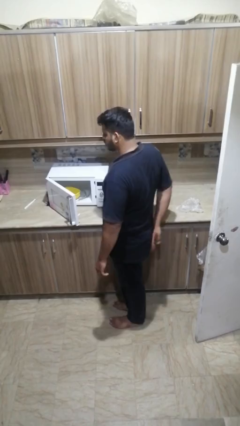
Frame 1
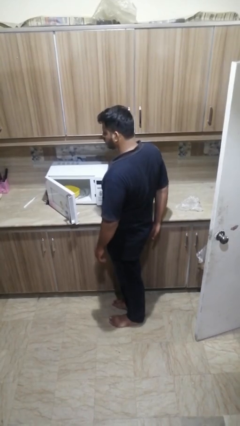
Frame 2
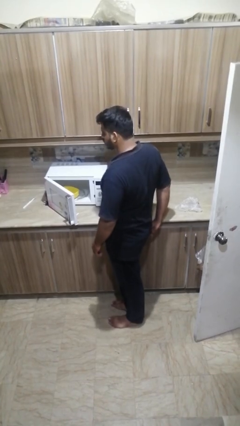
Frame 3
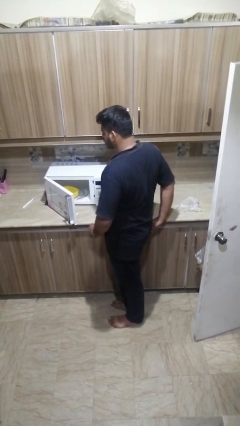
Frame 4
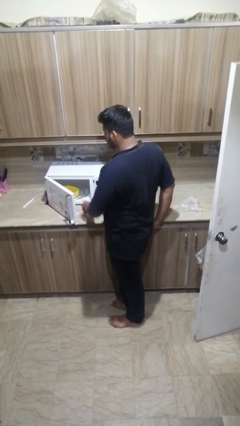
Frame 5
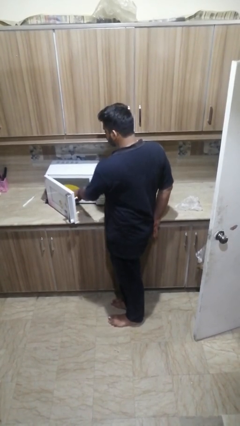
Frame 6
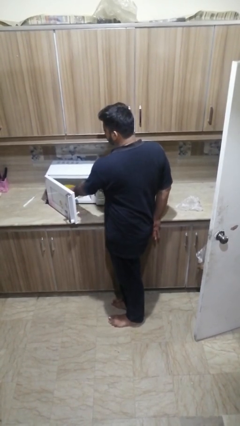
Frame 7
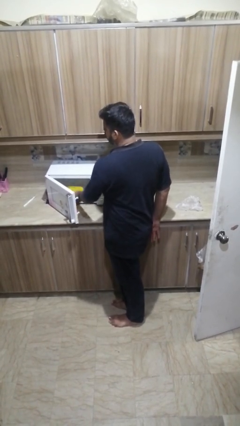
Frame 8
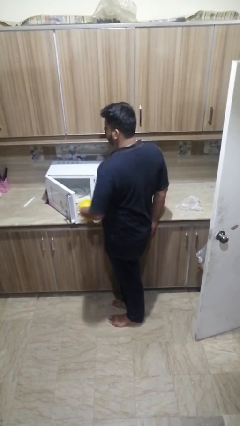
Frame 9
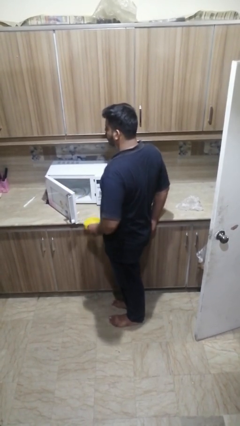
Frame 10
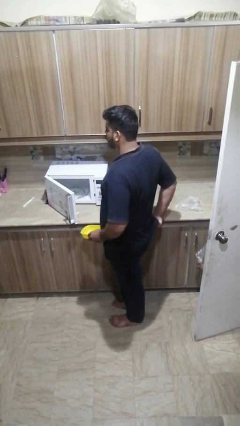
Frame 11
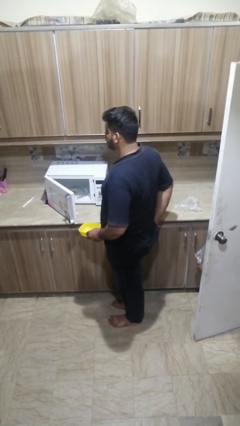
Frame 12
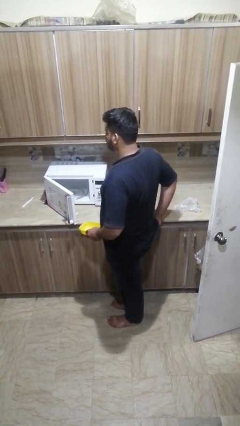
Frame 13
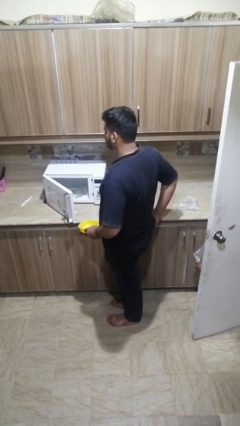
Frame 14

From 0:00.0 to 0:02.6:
person takes object from microwave

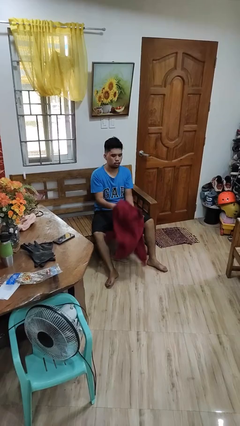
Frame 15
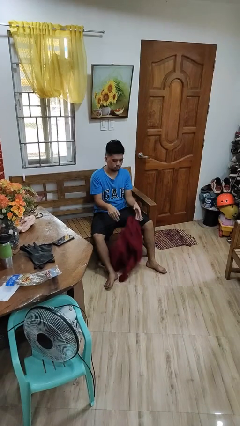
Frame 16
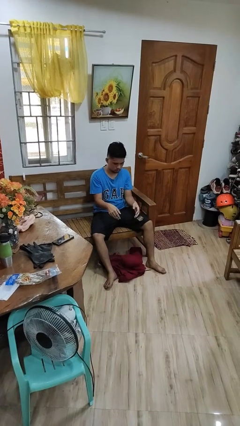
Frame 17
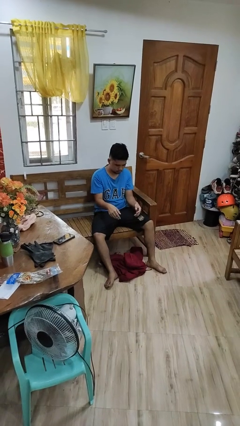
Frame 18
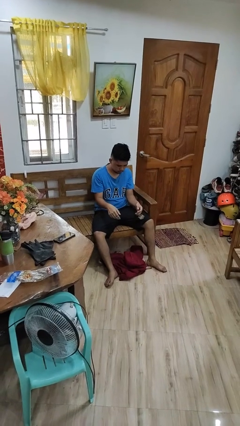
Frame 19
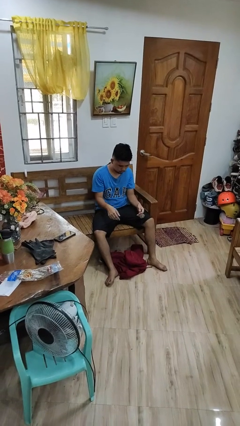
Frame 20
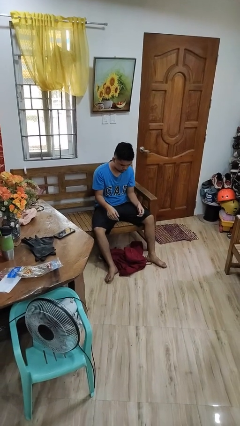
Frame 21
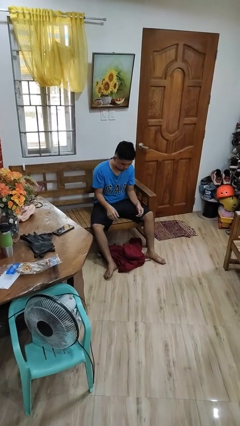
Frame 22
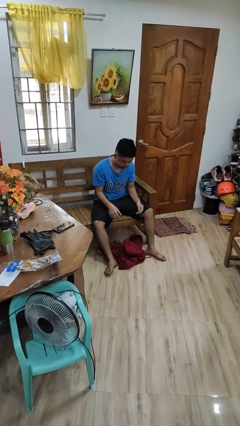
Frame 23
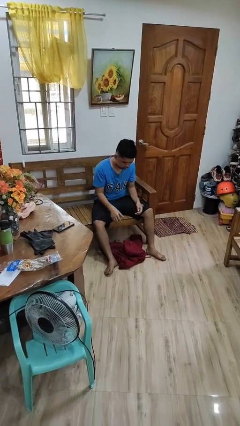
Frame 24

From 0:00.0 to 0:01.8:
person drops object

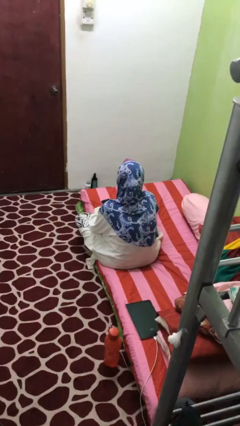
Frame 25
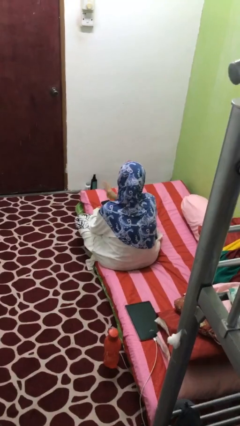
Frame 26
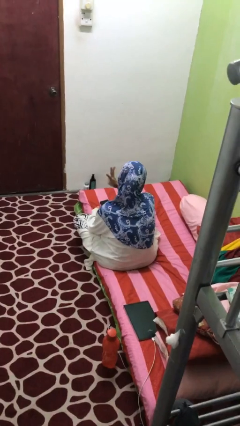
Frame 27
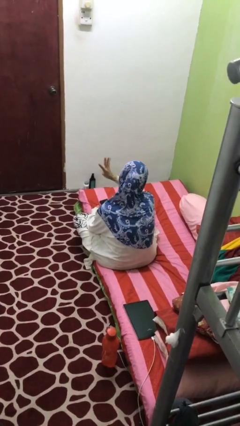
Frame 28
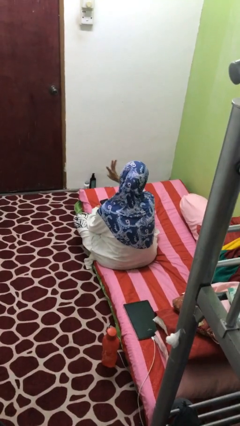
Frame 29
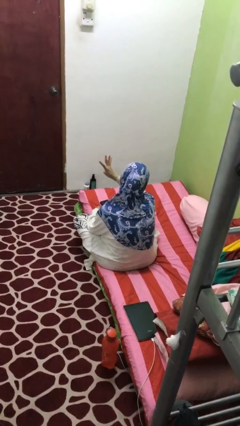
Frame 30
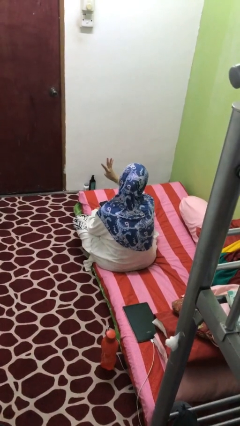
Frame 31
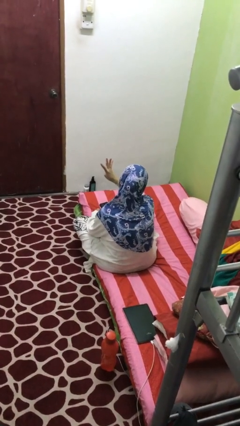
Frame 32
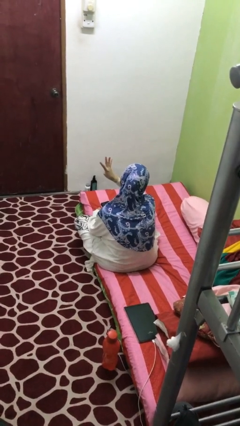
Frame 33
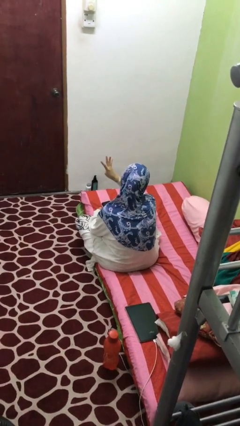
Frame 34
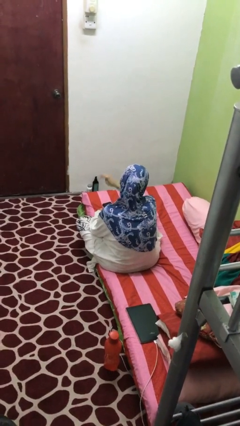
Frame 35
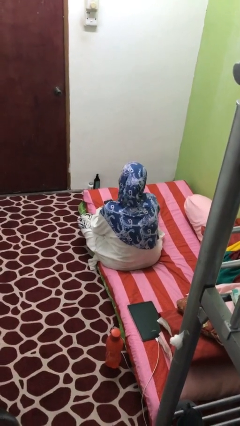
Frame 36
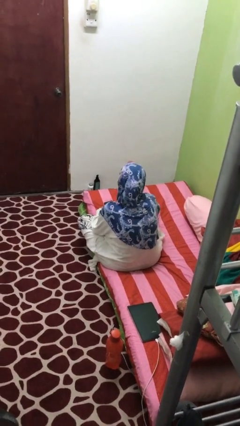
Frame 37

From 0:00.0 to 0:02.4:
person gestures number four

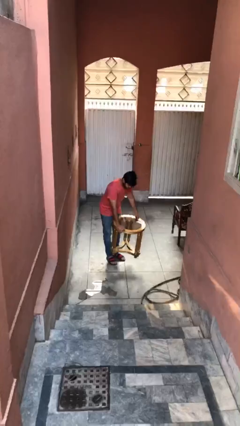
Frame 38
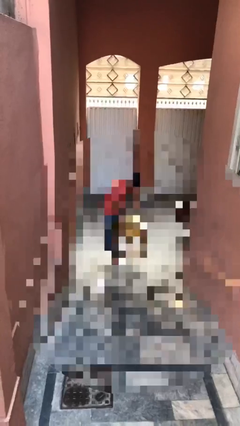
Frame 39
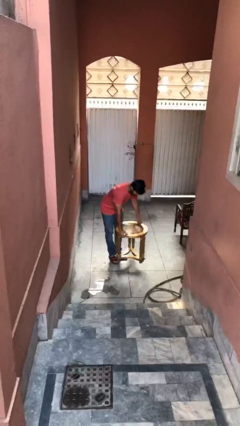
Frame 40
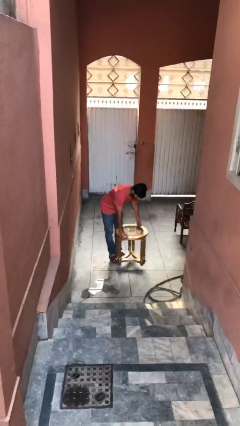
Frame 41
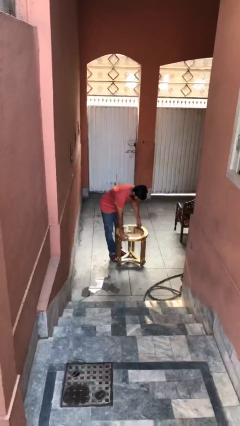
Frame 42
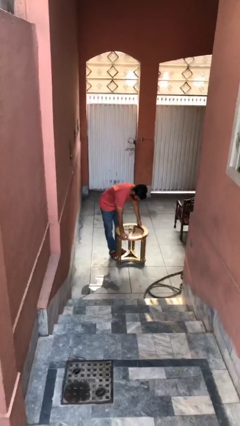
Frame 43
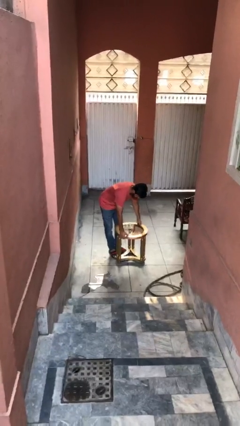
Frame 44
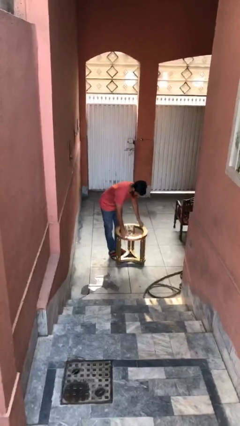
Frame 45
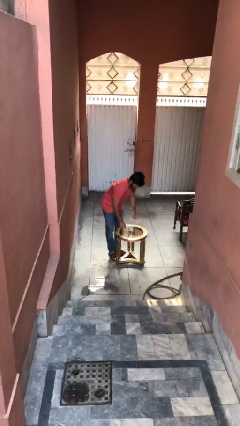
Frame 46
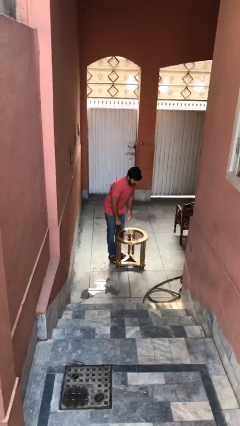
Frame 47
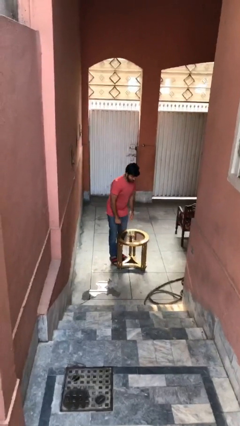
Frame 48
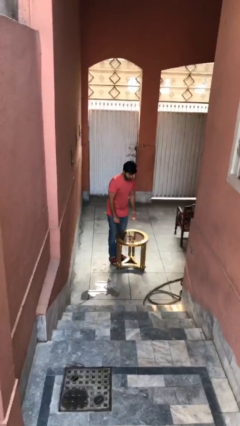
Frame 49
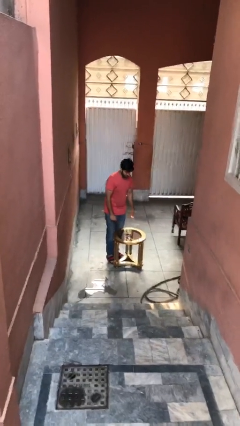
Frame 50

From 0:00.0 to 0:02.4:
person puts down object on floor

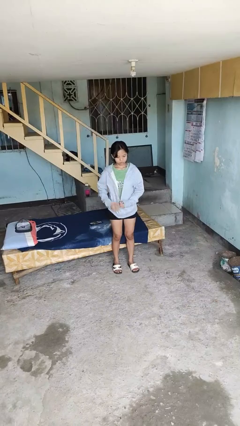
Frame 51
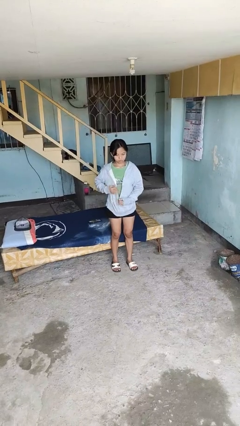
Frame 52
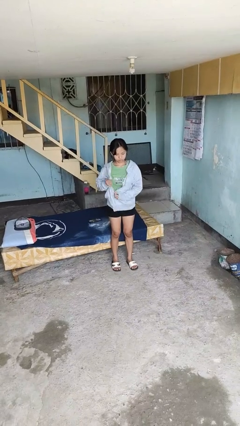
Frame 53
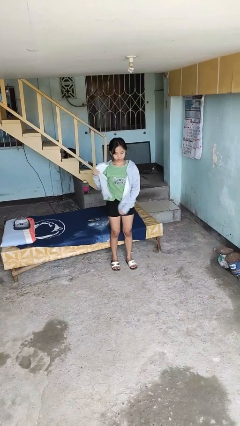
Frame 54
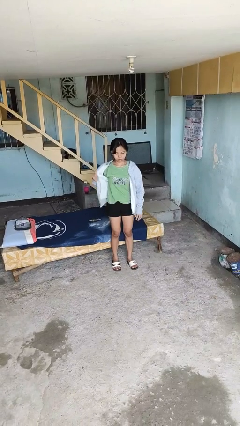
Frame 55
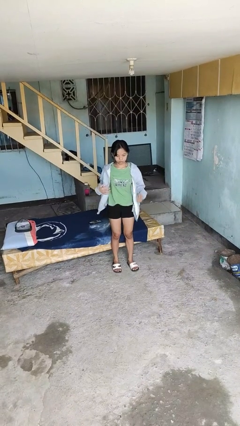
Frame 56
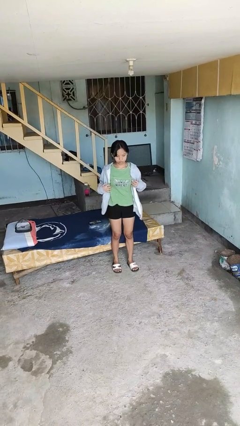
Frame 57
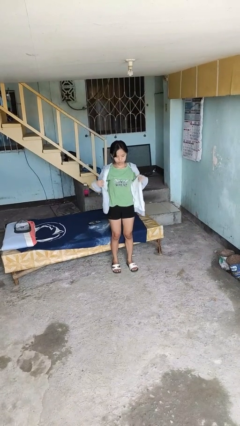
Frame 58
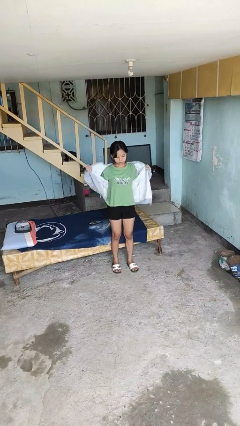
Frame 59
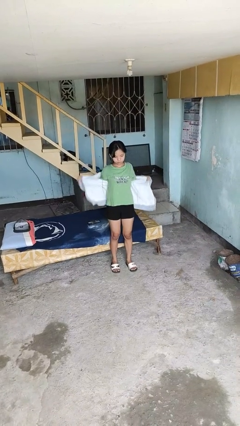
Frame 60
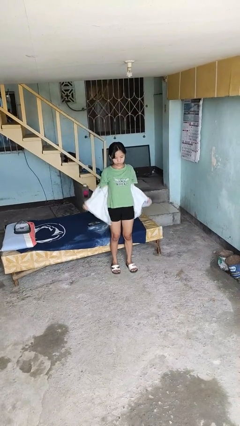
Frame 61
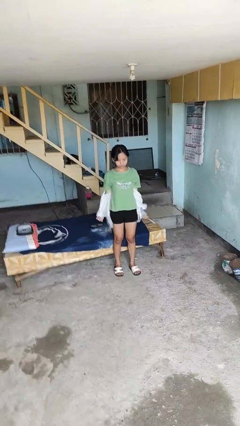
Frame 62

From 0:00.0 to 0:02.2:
person unzips jacket

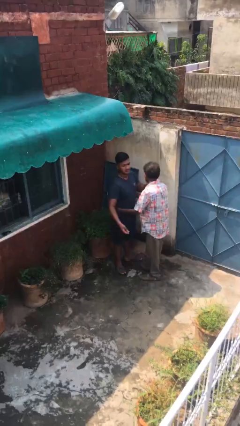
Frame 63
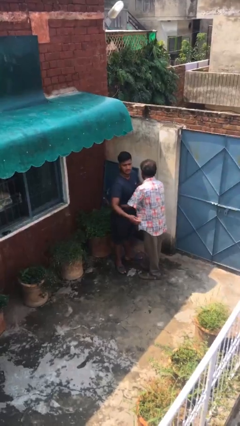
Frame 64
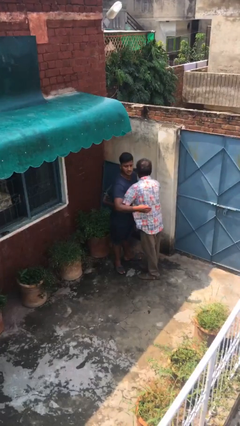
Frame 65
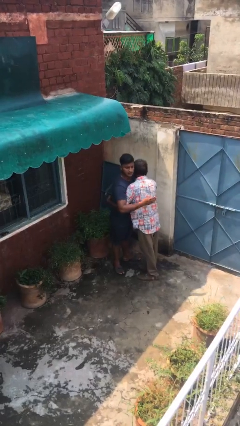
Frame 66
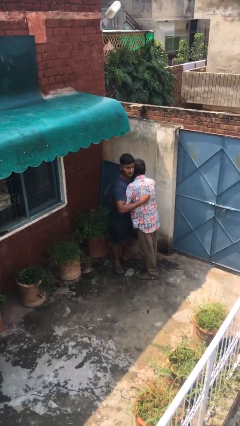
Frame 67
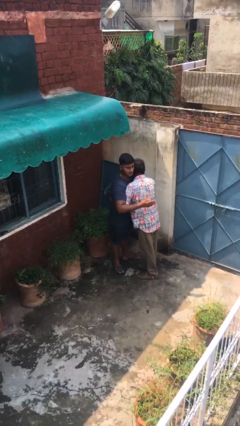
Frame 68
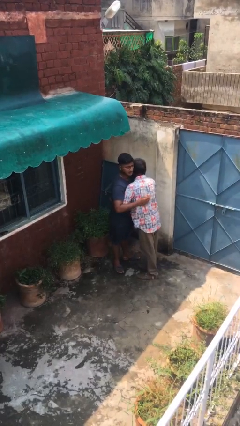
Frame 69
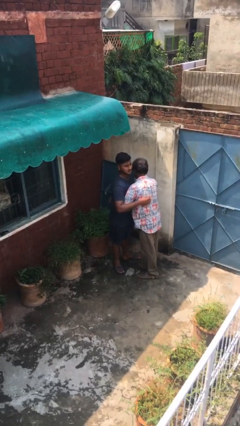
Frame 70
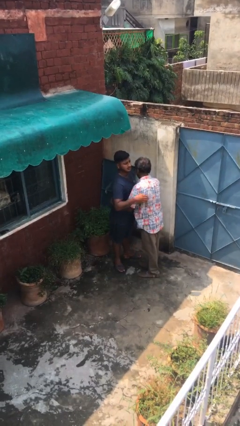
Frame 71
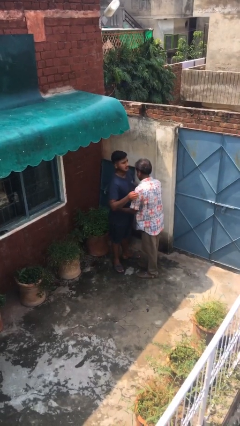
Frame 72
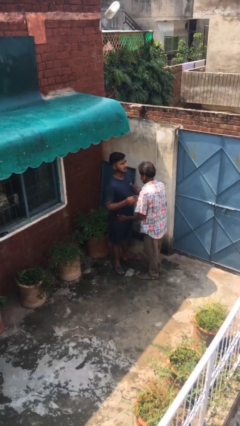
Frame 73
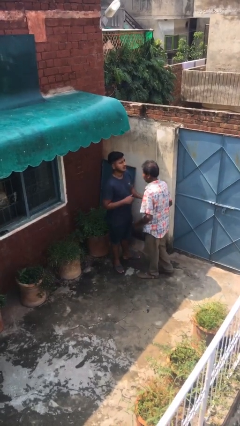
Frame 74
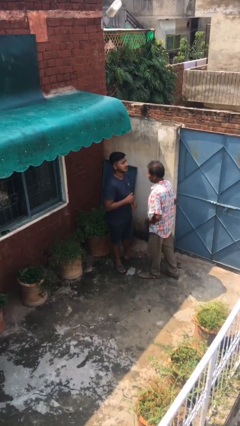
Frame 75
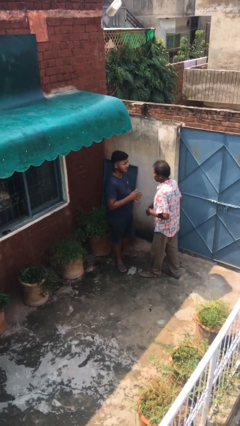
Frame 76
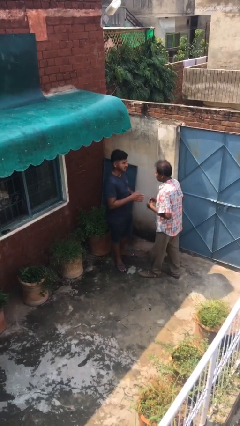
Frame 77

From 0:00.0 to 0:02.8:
person embraces person

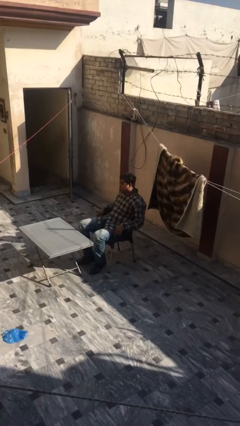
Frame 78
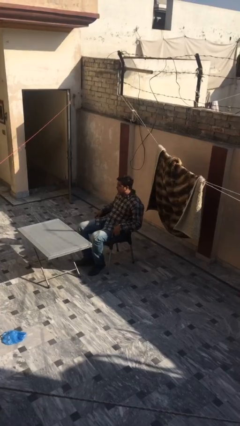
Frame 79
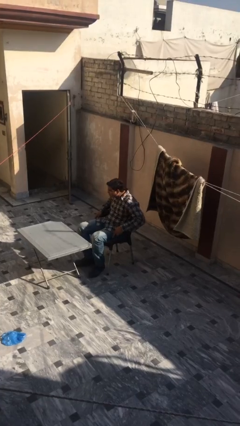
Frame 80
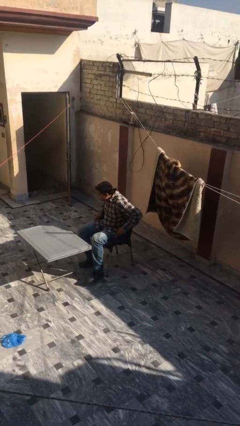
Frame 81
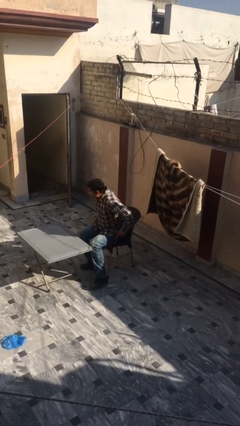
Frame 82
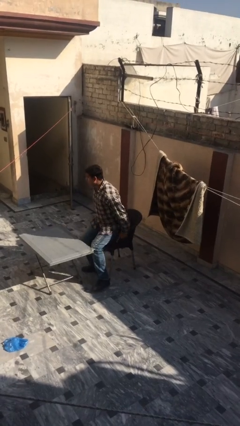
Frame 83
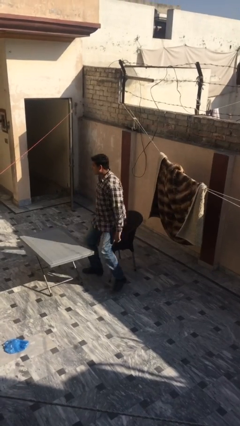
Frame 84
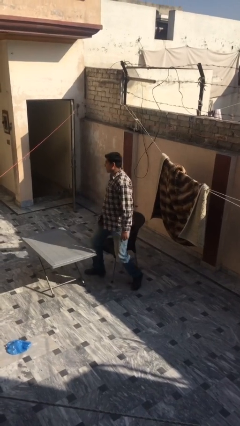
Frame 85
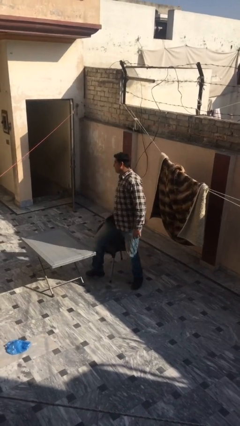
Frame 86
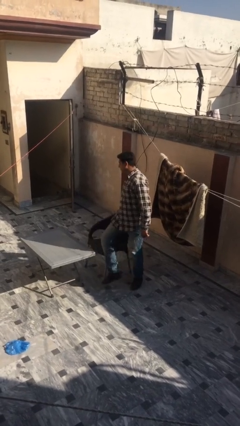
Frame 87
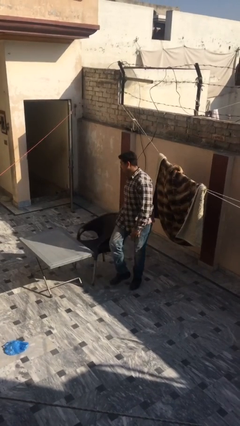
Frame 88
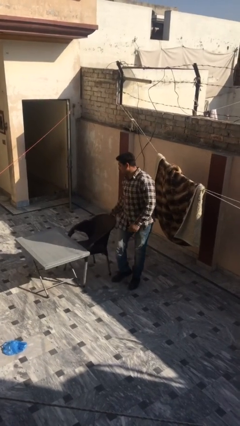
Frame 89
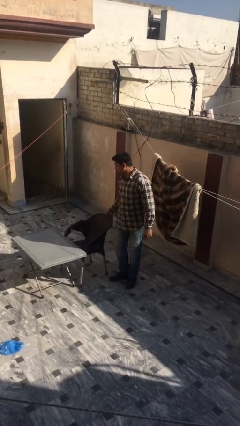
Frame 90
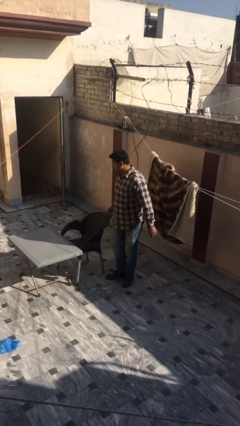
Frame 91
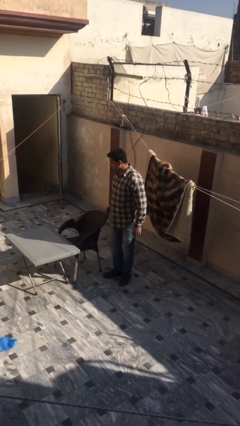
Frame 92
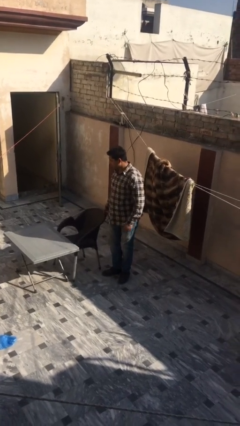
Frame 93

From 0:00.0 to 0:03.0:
person stands up
